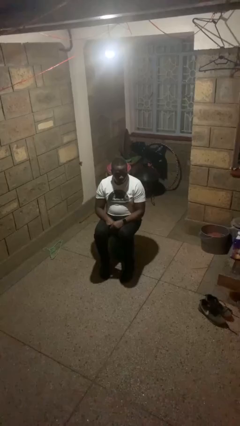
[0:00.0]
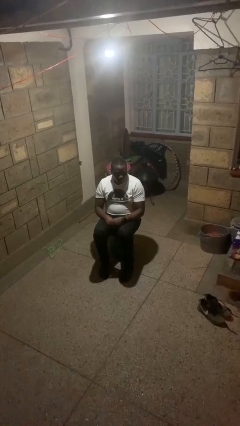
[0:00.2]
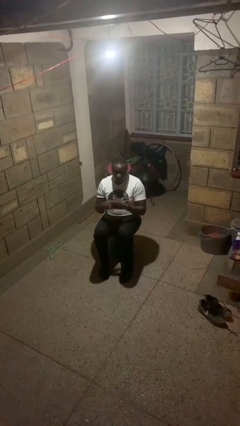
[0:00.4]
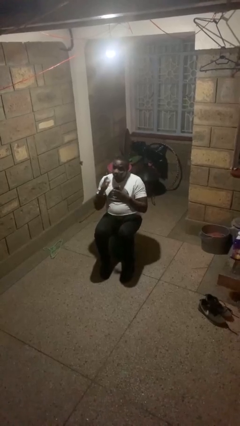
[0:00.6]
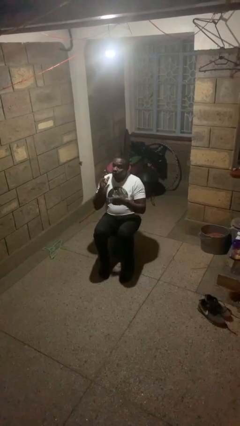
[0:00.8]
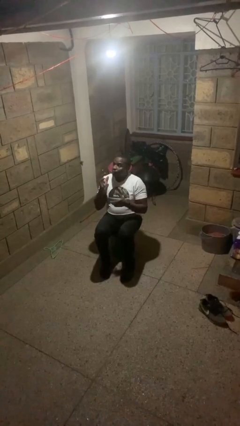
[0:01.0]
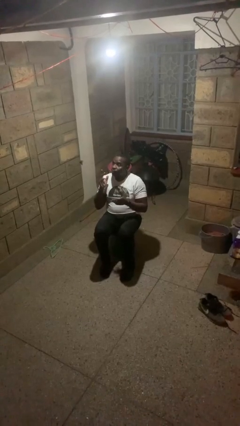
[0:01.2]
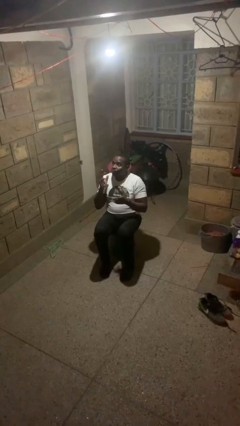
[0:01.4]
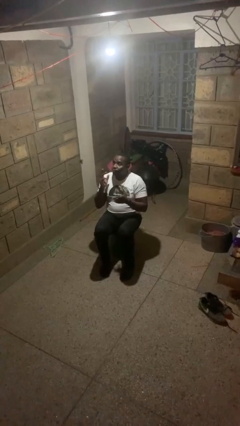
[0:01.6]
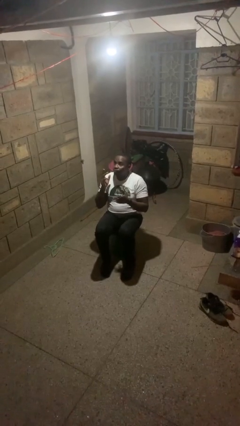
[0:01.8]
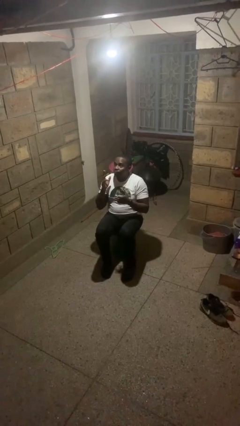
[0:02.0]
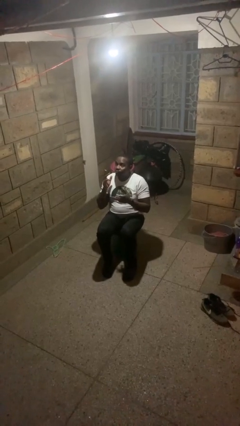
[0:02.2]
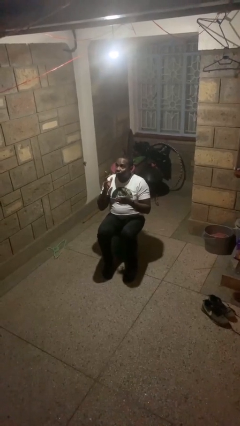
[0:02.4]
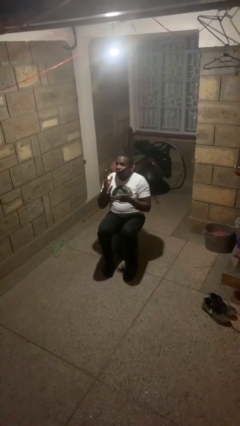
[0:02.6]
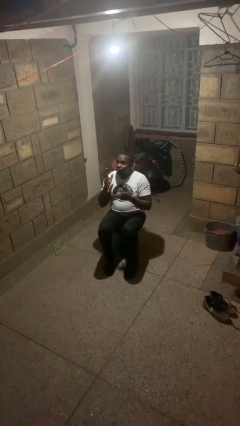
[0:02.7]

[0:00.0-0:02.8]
person shrugs

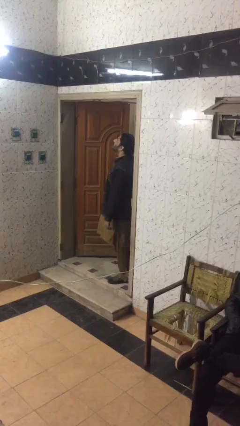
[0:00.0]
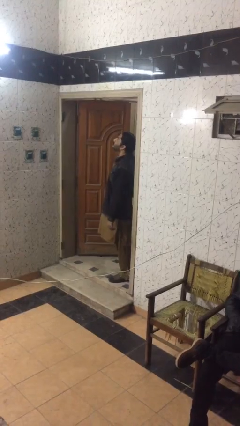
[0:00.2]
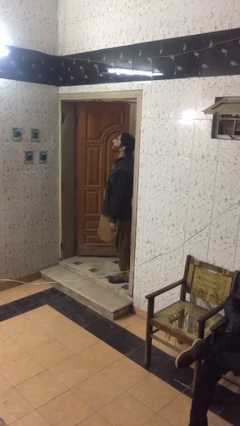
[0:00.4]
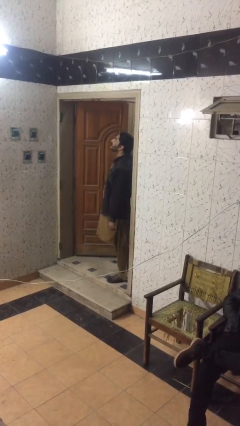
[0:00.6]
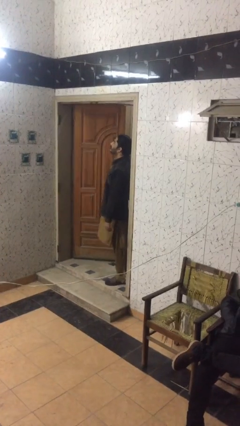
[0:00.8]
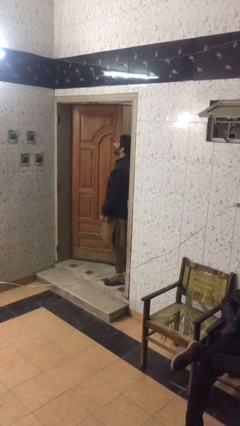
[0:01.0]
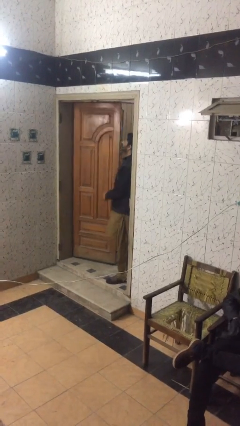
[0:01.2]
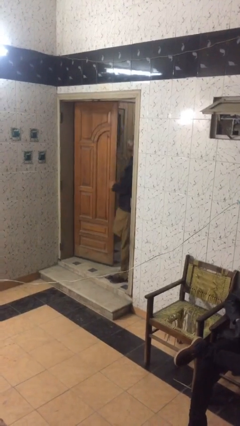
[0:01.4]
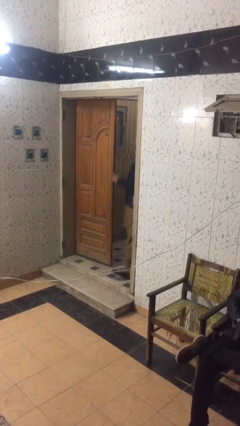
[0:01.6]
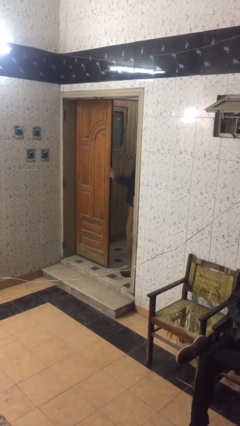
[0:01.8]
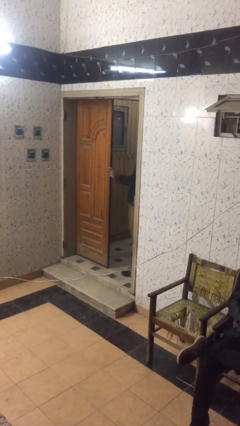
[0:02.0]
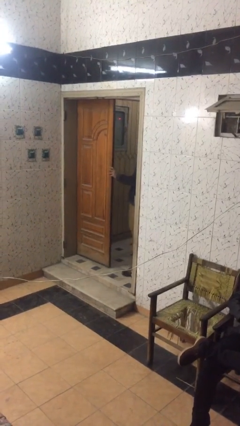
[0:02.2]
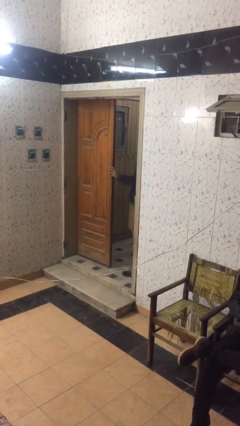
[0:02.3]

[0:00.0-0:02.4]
person closes facility door

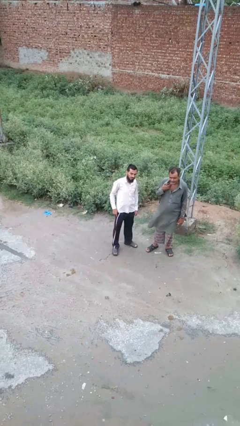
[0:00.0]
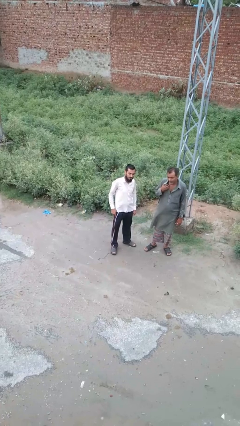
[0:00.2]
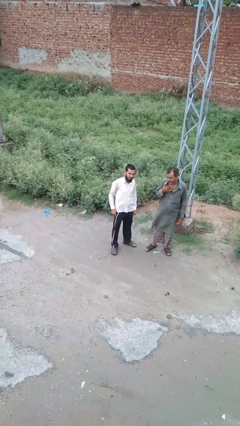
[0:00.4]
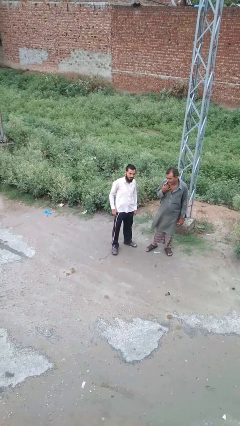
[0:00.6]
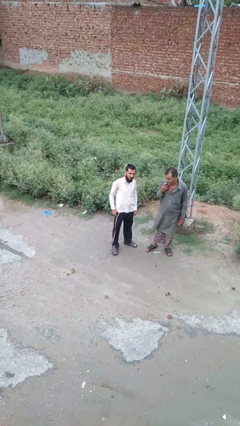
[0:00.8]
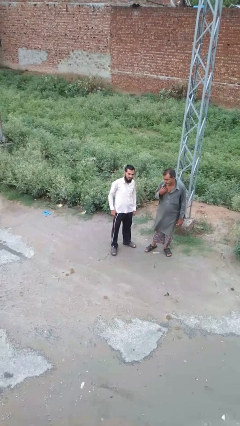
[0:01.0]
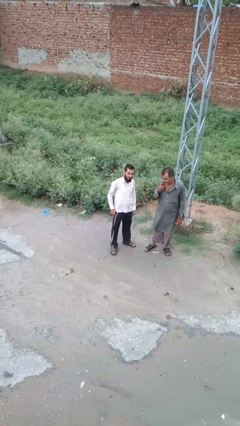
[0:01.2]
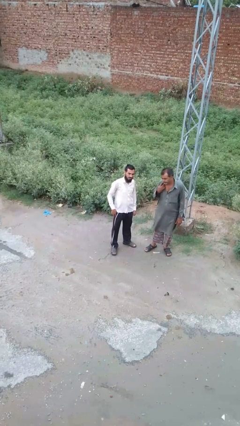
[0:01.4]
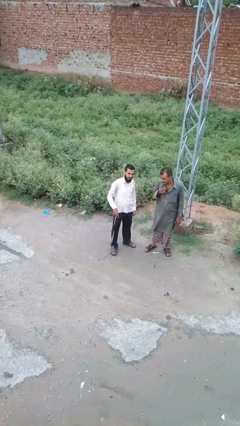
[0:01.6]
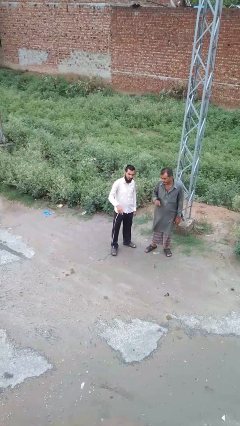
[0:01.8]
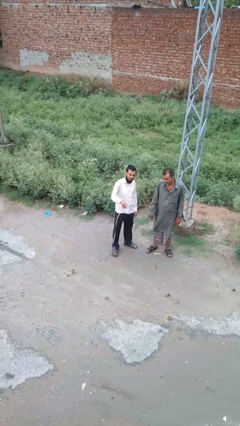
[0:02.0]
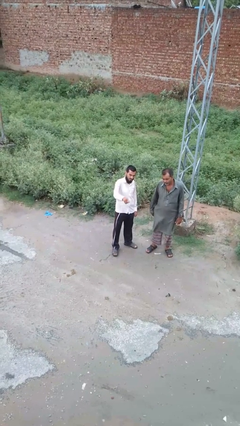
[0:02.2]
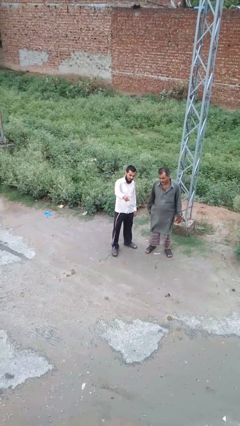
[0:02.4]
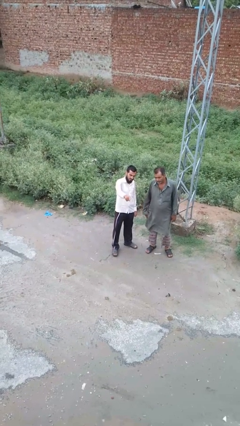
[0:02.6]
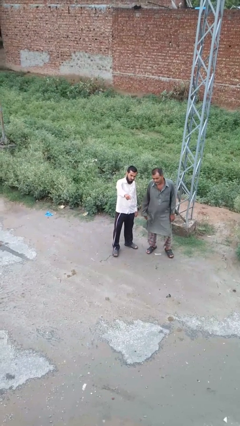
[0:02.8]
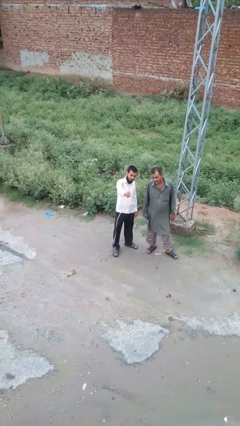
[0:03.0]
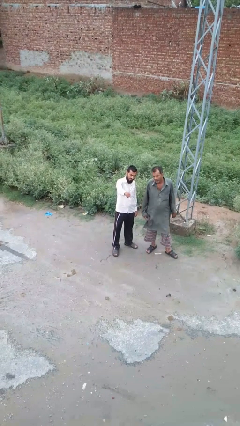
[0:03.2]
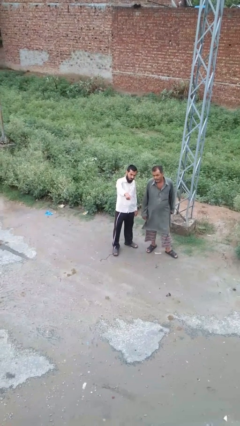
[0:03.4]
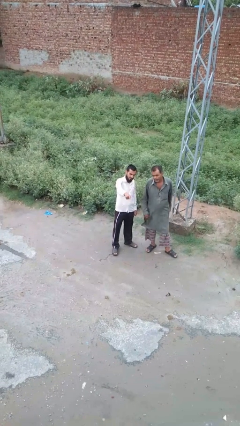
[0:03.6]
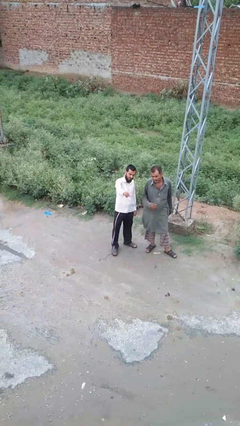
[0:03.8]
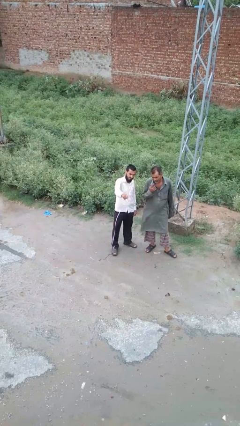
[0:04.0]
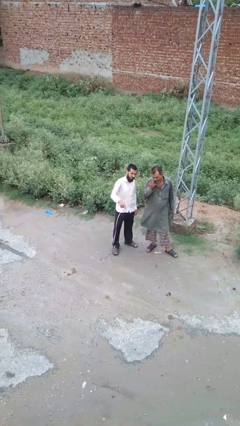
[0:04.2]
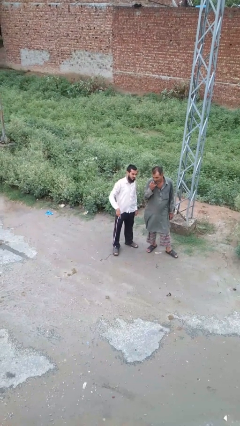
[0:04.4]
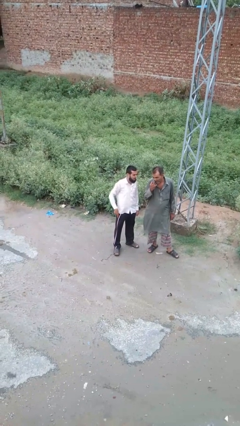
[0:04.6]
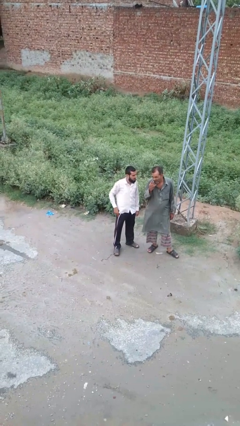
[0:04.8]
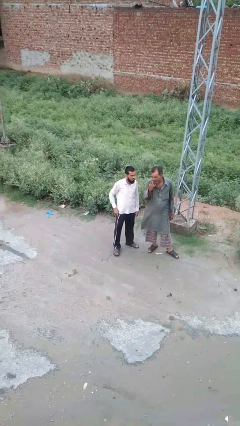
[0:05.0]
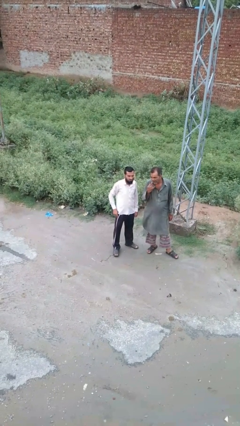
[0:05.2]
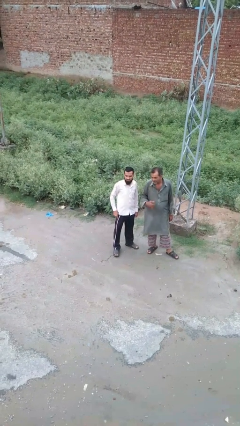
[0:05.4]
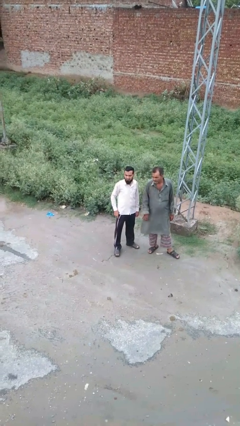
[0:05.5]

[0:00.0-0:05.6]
person points at person

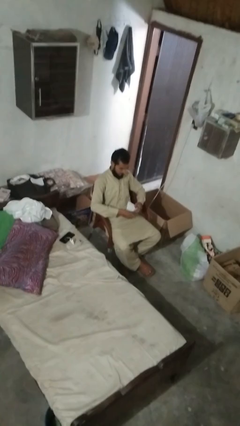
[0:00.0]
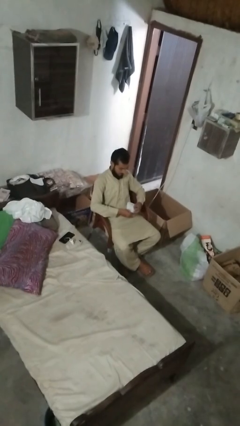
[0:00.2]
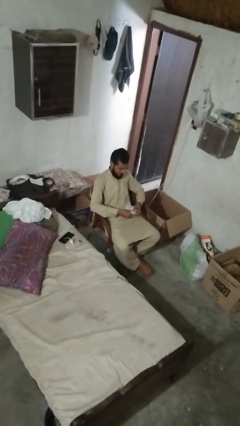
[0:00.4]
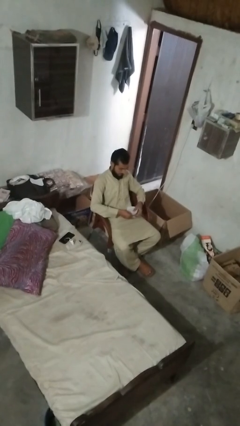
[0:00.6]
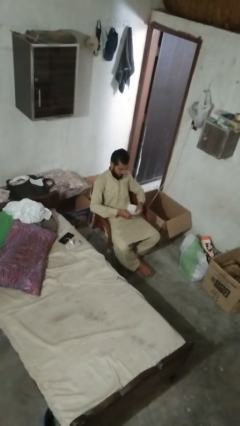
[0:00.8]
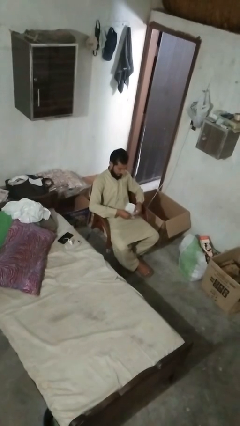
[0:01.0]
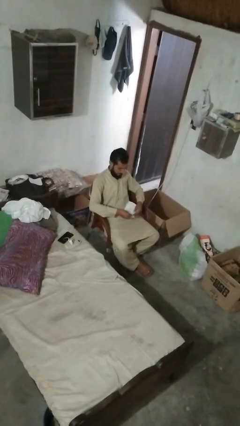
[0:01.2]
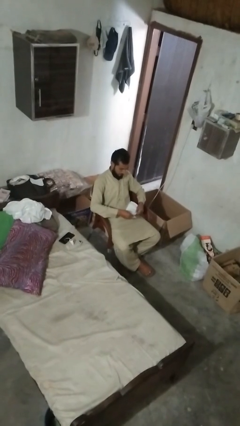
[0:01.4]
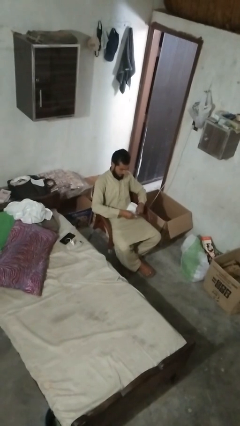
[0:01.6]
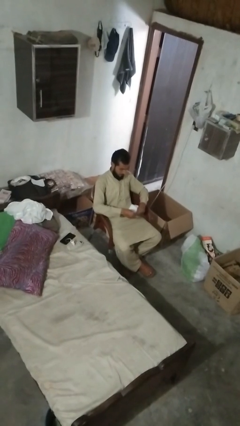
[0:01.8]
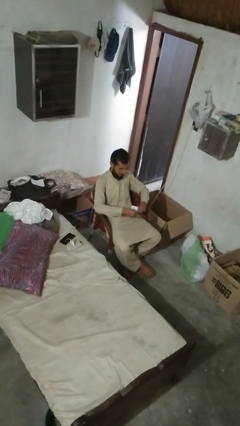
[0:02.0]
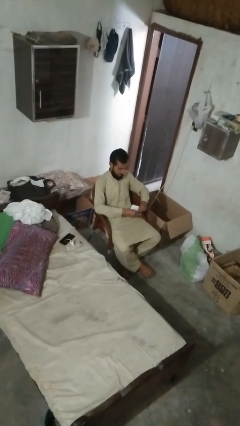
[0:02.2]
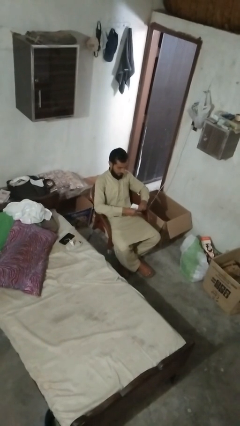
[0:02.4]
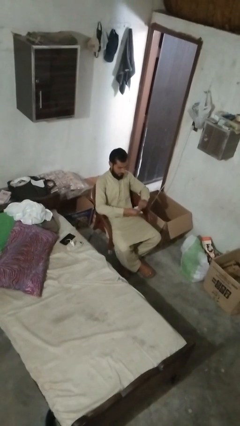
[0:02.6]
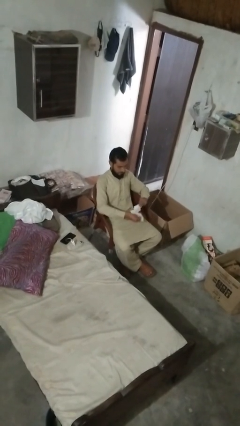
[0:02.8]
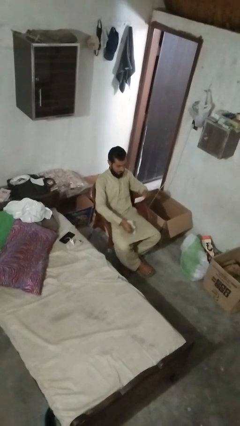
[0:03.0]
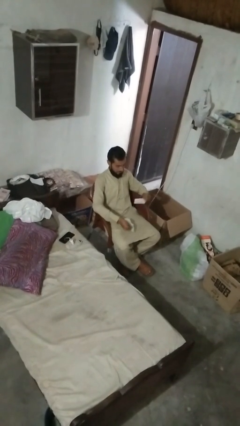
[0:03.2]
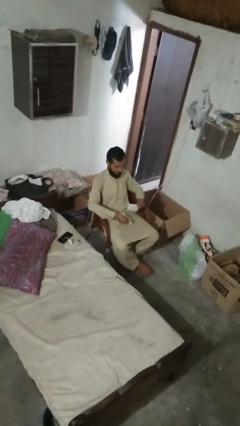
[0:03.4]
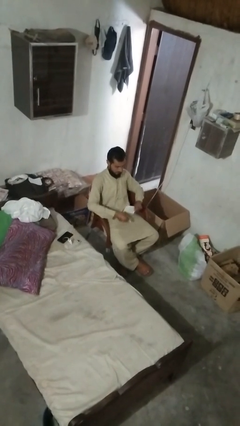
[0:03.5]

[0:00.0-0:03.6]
person tears paper

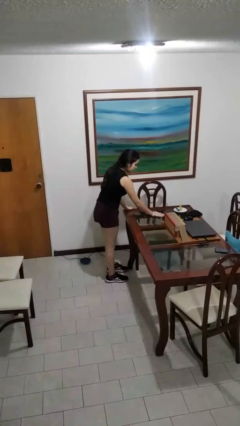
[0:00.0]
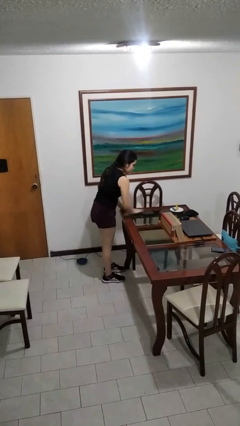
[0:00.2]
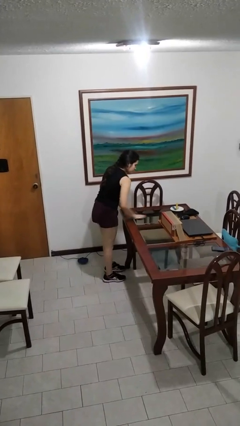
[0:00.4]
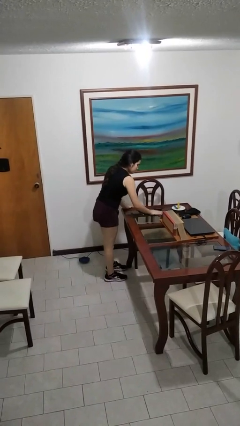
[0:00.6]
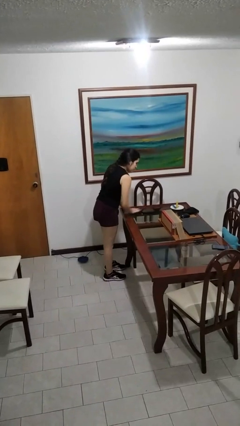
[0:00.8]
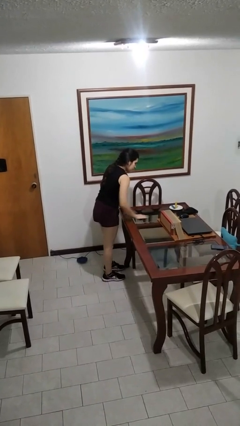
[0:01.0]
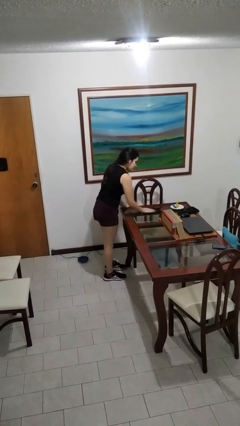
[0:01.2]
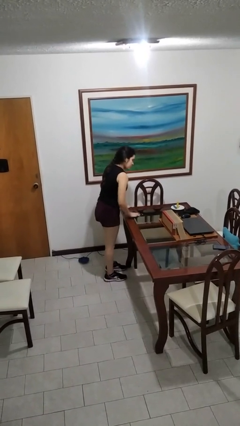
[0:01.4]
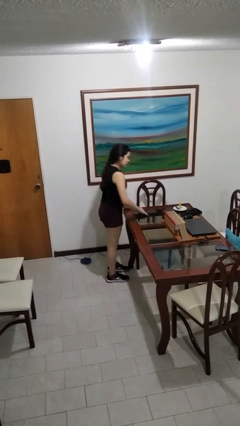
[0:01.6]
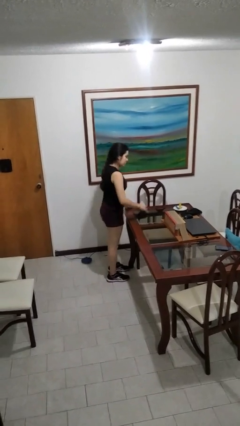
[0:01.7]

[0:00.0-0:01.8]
person cleans table with rag

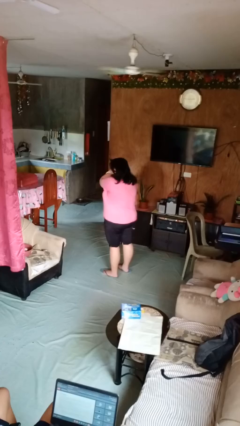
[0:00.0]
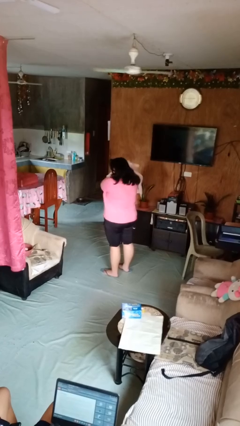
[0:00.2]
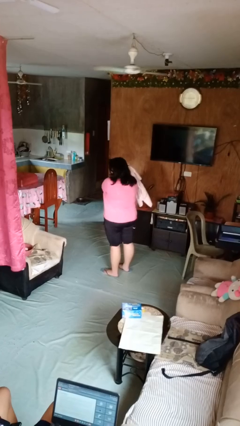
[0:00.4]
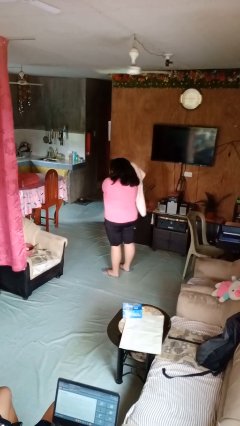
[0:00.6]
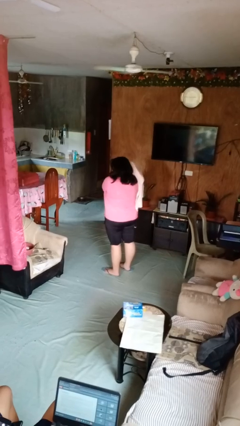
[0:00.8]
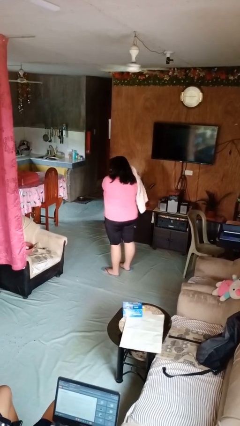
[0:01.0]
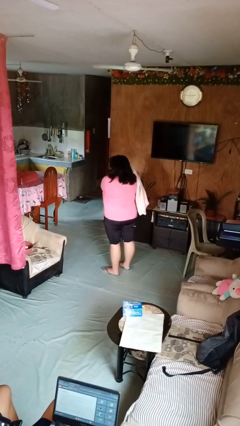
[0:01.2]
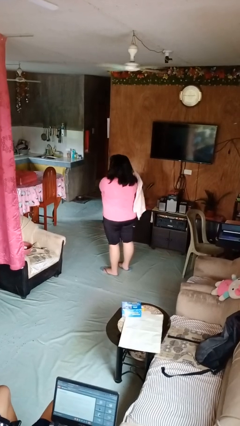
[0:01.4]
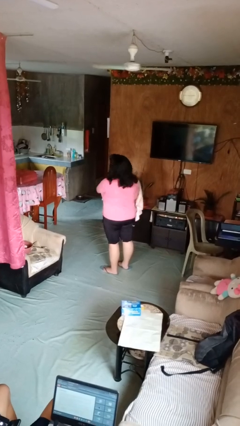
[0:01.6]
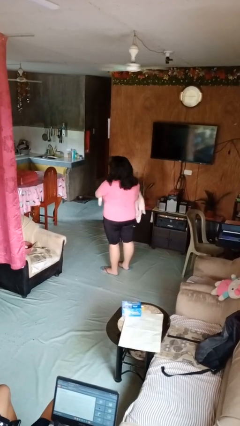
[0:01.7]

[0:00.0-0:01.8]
person dries hair with towel
